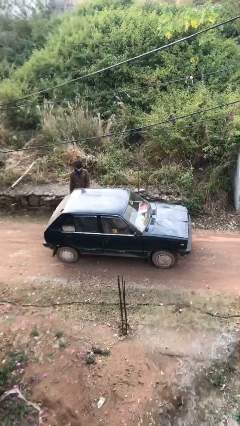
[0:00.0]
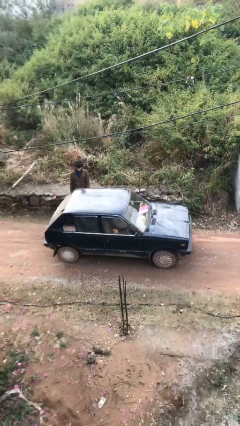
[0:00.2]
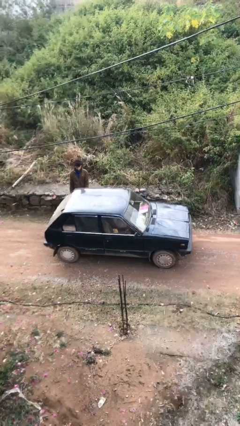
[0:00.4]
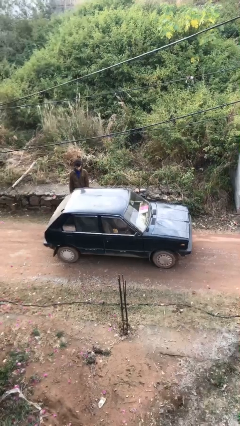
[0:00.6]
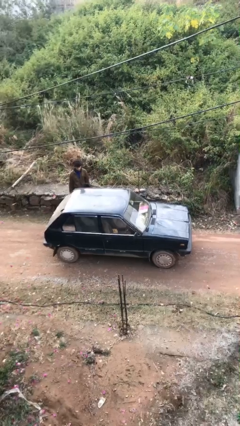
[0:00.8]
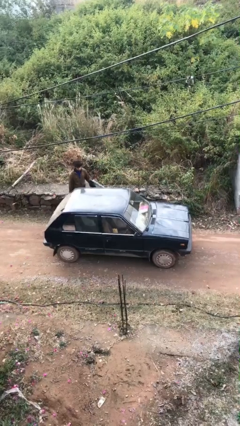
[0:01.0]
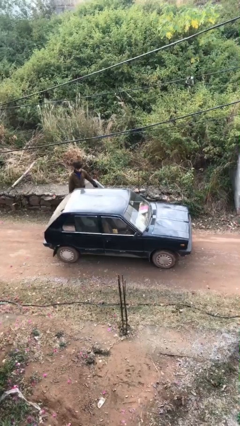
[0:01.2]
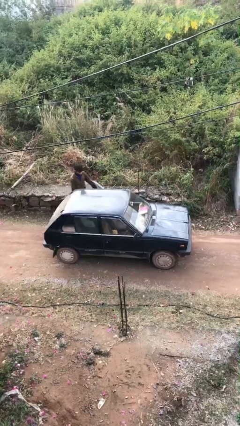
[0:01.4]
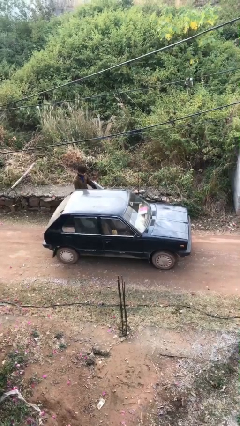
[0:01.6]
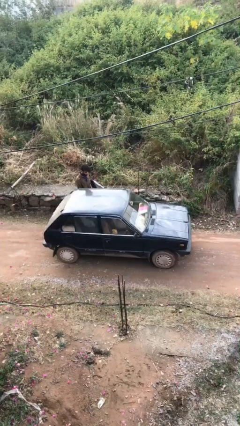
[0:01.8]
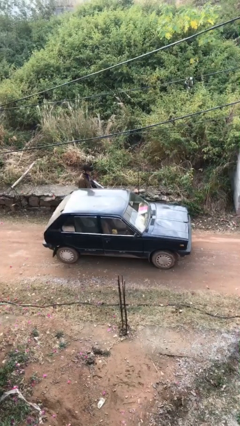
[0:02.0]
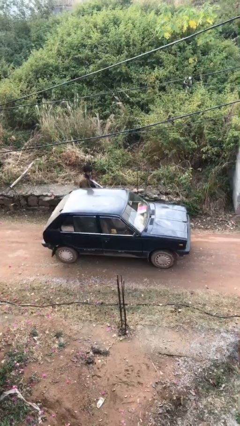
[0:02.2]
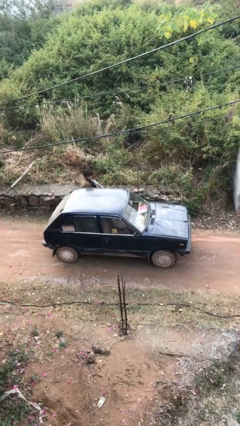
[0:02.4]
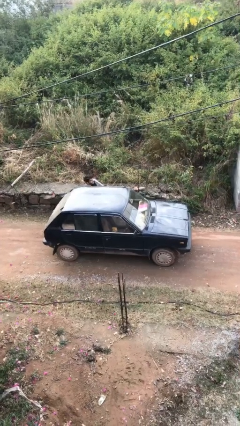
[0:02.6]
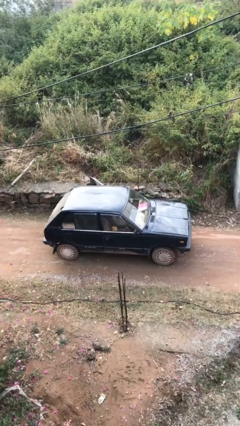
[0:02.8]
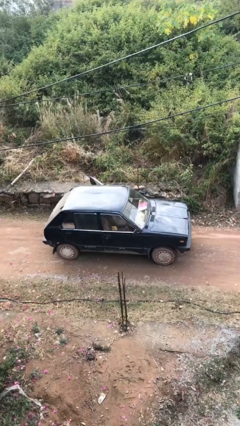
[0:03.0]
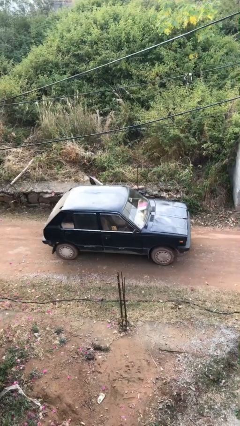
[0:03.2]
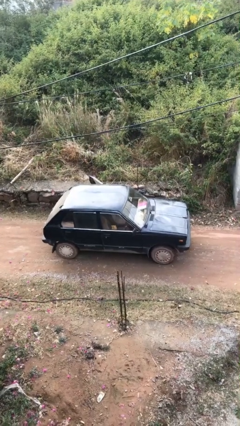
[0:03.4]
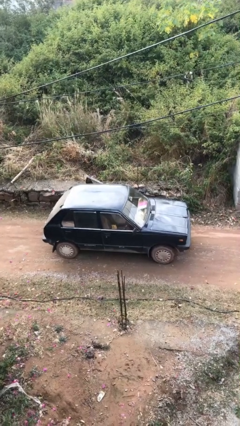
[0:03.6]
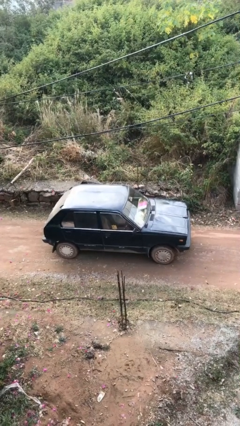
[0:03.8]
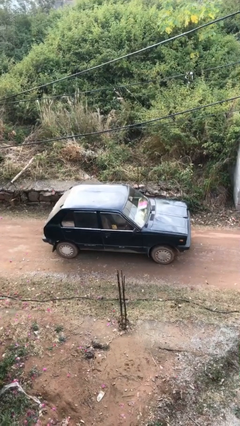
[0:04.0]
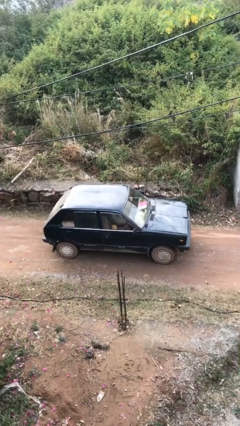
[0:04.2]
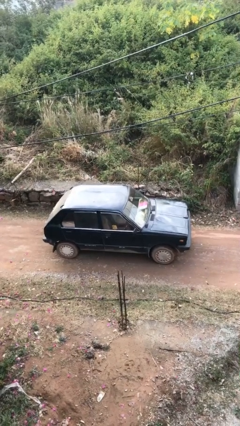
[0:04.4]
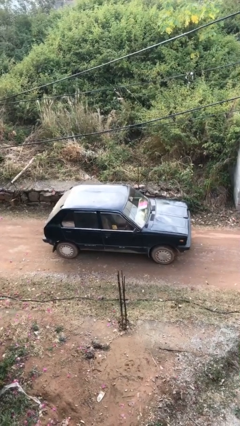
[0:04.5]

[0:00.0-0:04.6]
car picks up person

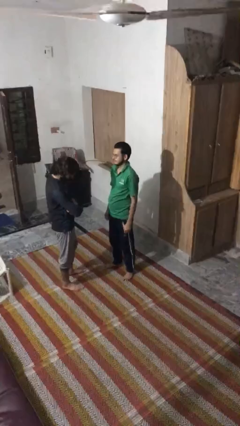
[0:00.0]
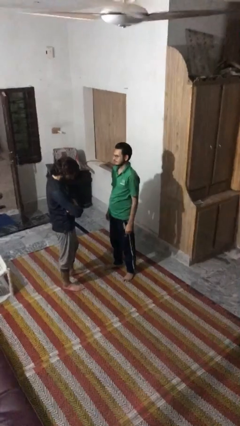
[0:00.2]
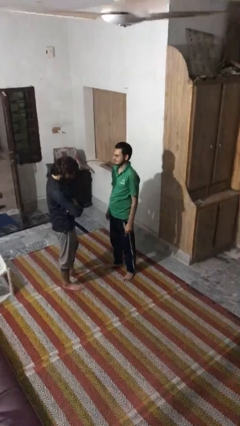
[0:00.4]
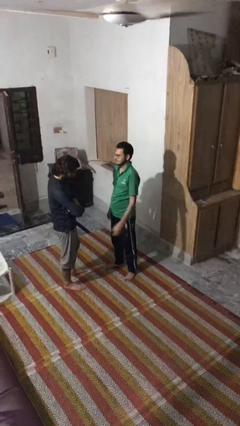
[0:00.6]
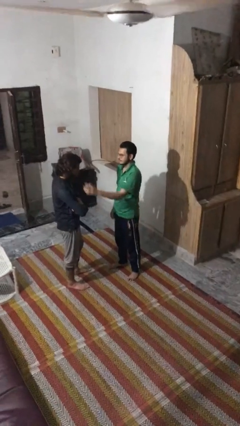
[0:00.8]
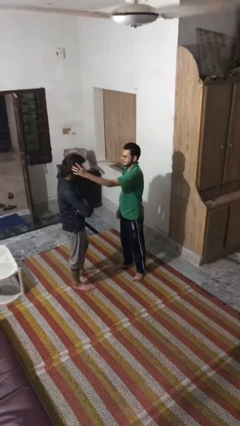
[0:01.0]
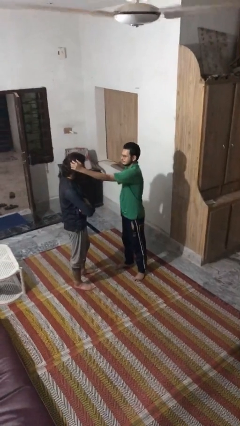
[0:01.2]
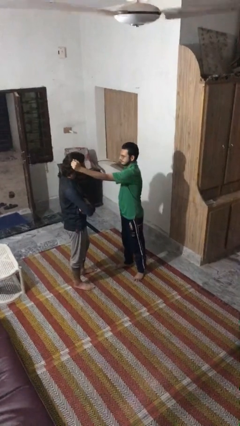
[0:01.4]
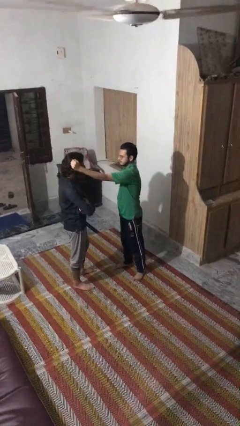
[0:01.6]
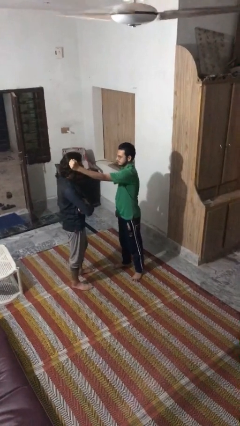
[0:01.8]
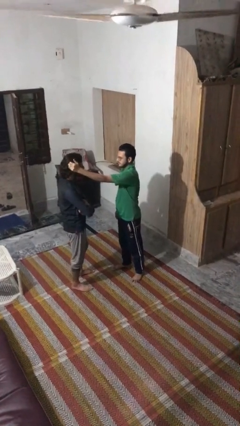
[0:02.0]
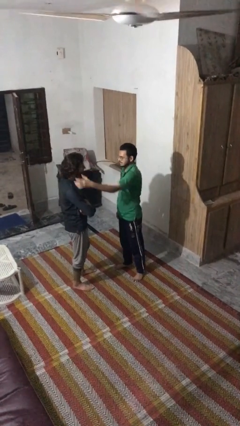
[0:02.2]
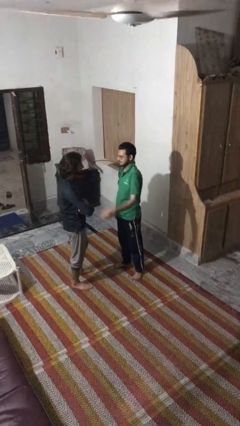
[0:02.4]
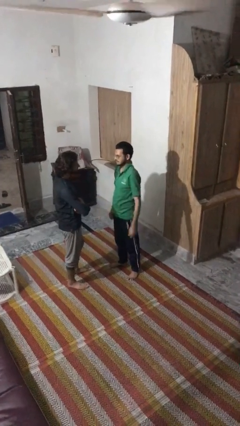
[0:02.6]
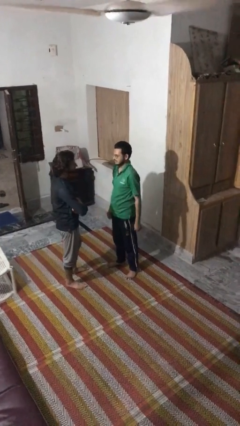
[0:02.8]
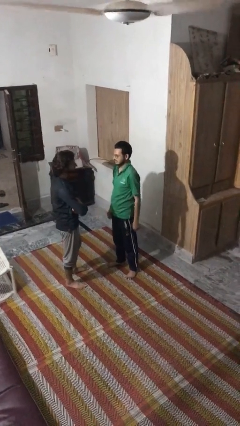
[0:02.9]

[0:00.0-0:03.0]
person grabs person by hair

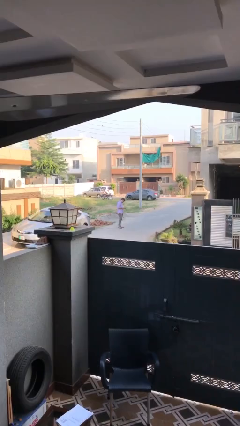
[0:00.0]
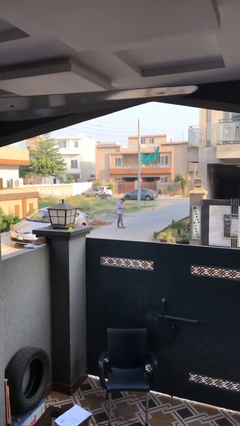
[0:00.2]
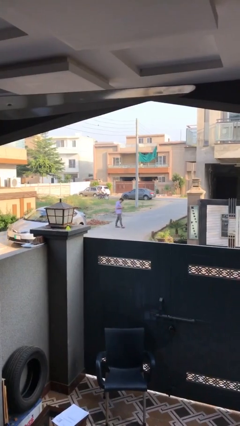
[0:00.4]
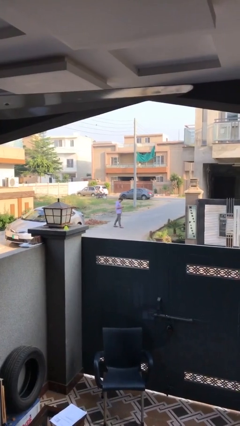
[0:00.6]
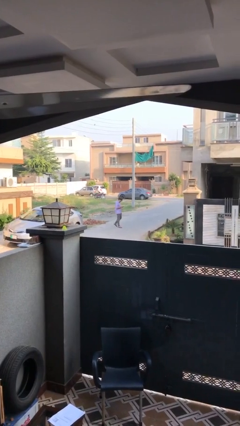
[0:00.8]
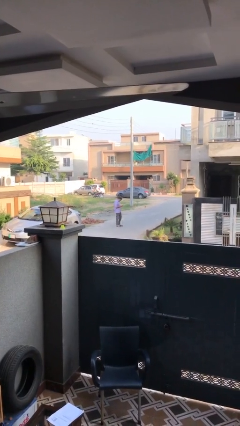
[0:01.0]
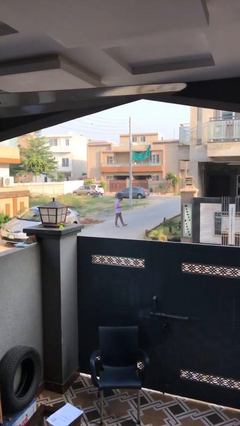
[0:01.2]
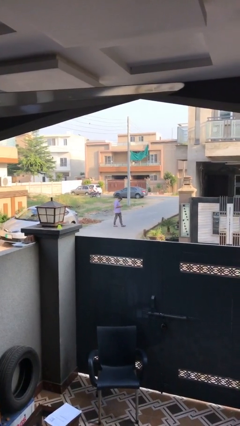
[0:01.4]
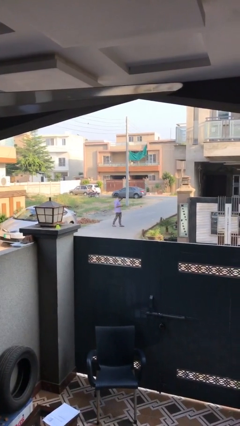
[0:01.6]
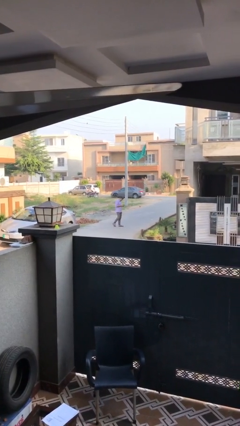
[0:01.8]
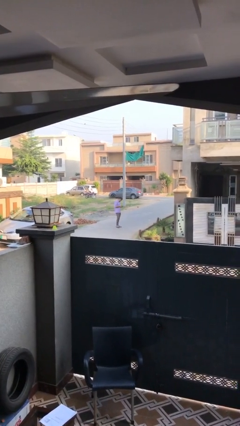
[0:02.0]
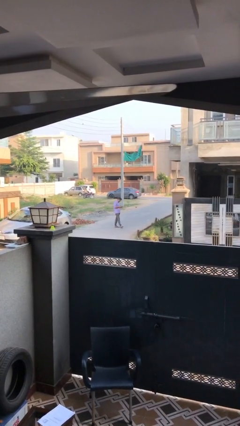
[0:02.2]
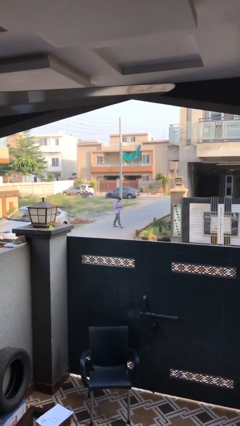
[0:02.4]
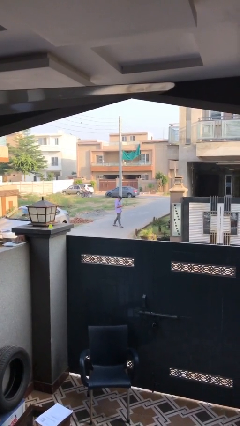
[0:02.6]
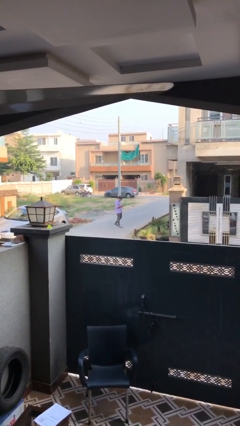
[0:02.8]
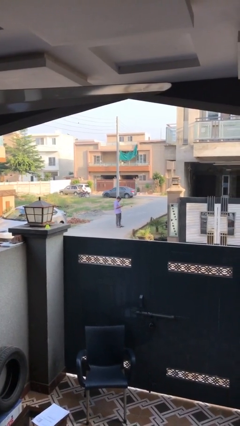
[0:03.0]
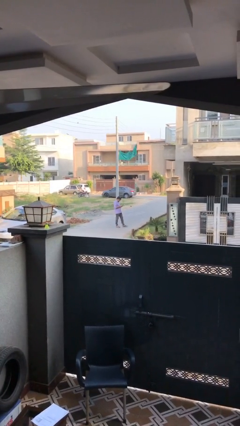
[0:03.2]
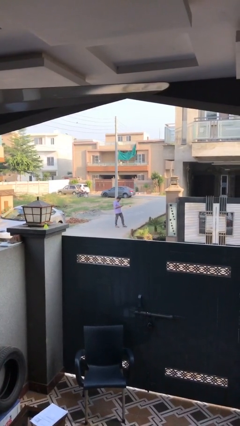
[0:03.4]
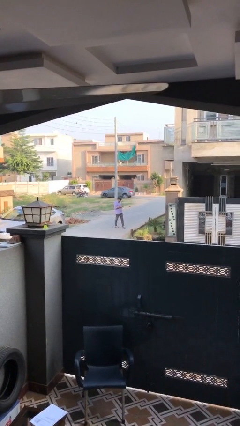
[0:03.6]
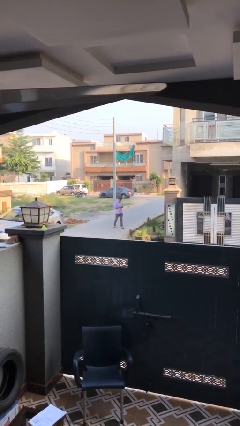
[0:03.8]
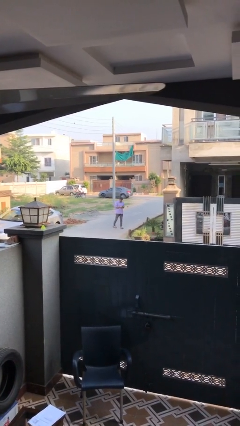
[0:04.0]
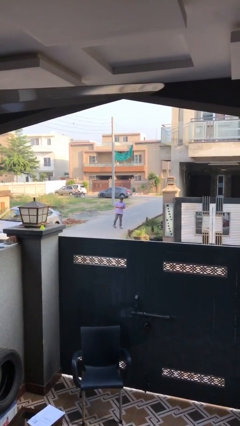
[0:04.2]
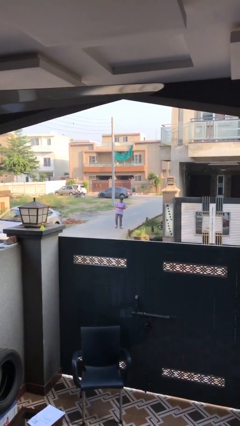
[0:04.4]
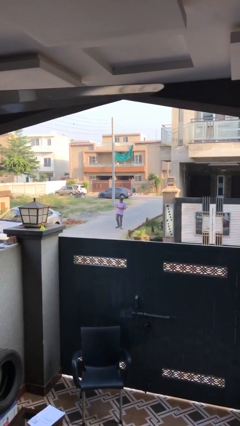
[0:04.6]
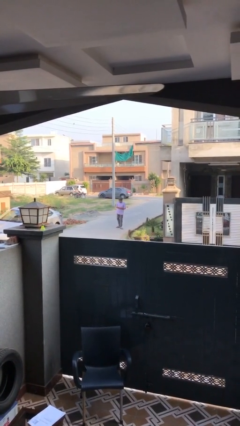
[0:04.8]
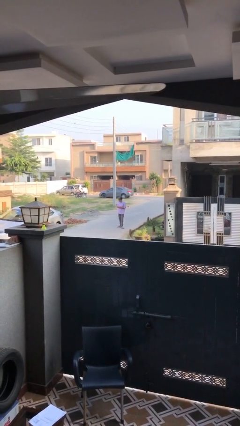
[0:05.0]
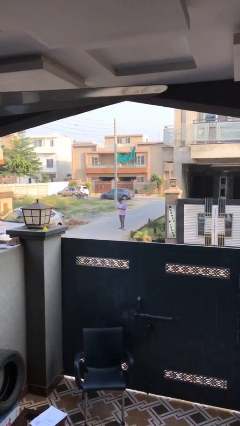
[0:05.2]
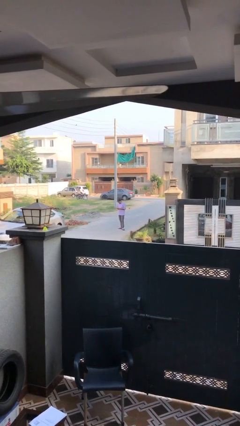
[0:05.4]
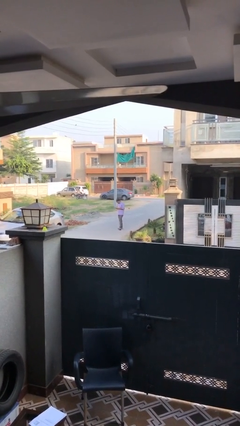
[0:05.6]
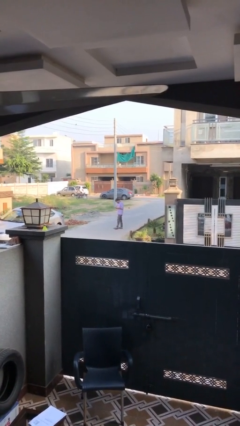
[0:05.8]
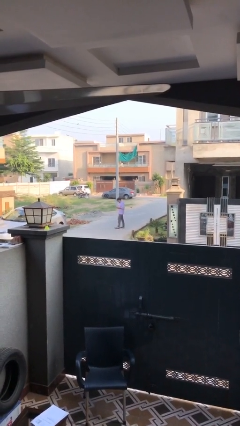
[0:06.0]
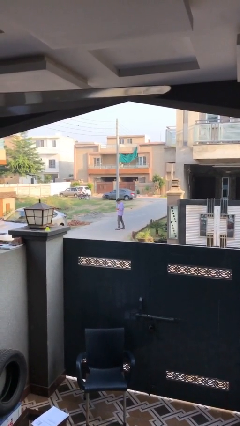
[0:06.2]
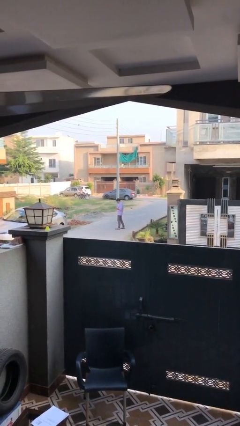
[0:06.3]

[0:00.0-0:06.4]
person texts on phone

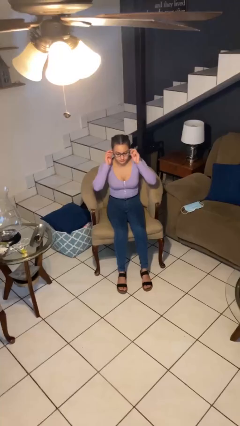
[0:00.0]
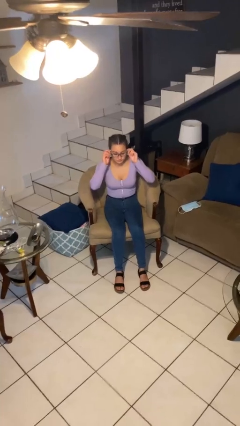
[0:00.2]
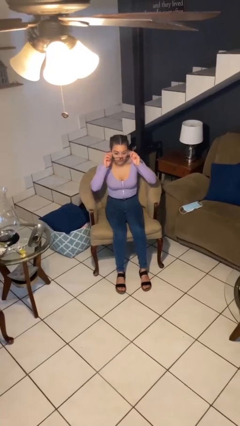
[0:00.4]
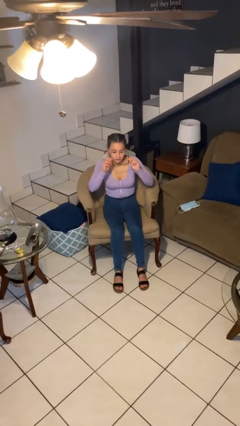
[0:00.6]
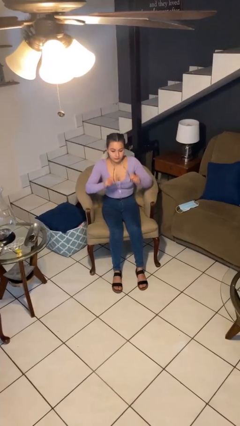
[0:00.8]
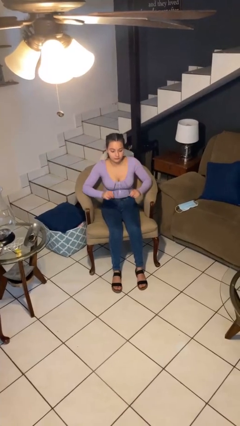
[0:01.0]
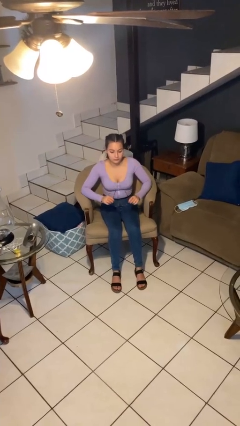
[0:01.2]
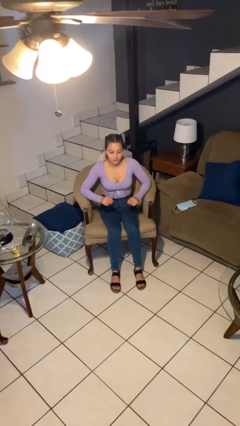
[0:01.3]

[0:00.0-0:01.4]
person takes off glasses

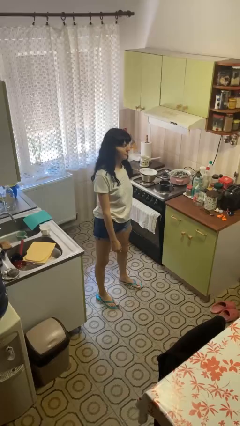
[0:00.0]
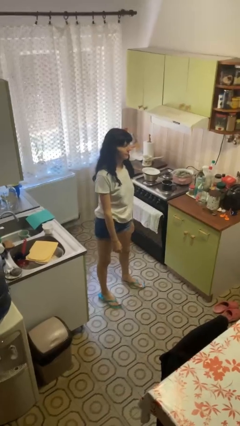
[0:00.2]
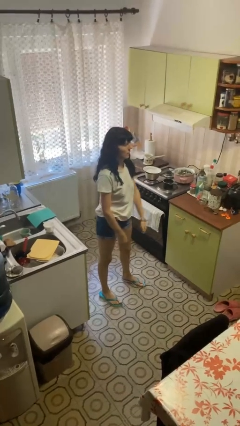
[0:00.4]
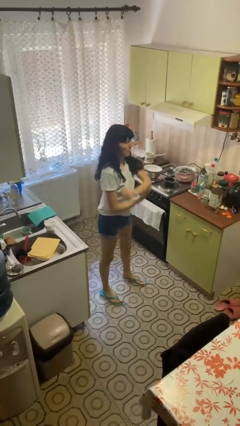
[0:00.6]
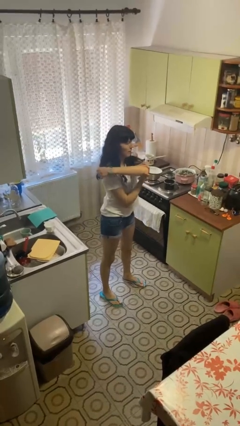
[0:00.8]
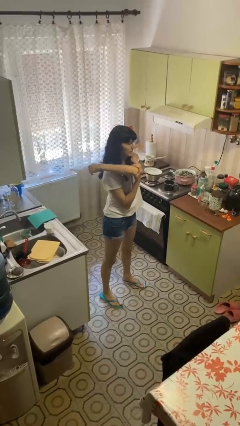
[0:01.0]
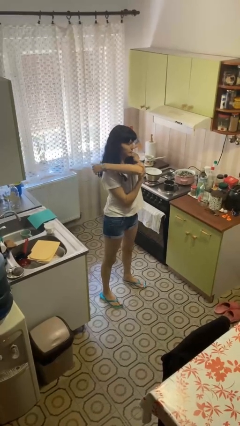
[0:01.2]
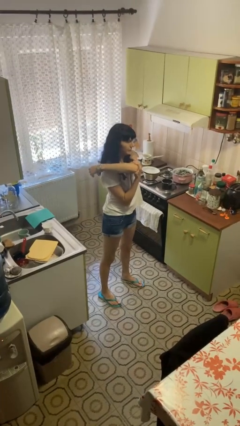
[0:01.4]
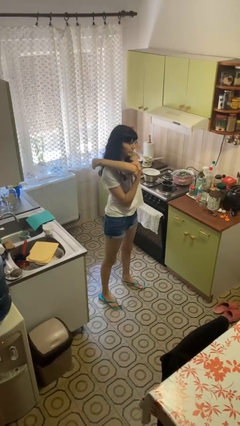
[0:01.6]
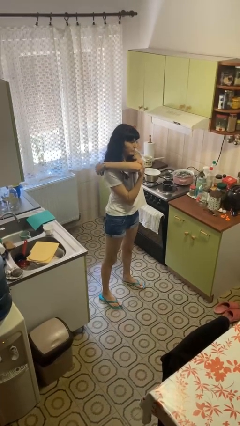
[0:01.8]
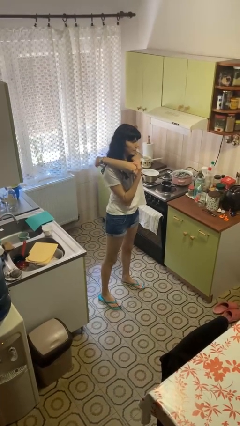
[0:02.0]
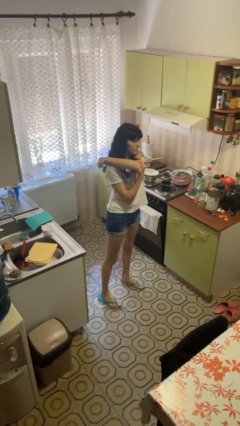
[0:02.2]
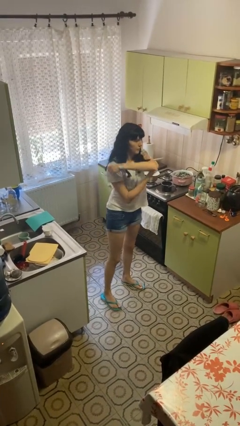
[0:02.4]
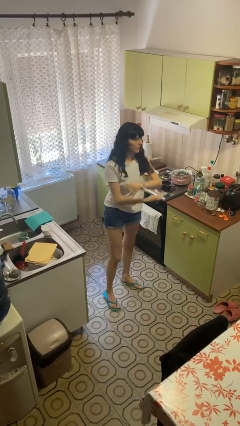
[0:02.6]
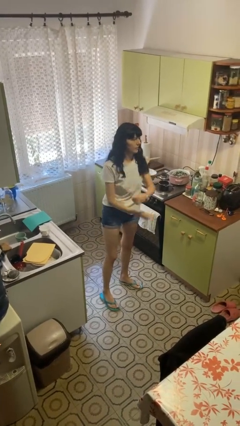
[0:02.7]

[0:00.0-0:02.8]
person stretches arms to side
